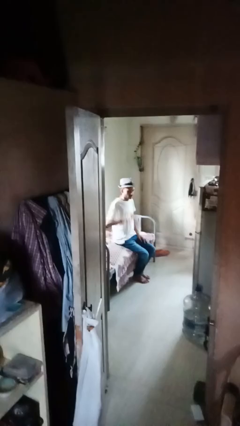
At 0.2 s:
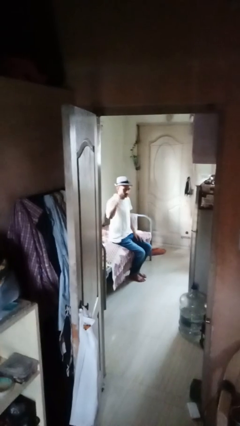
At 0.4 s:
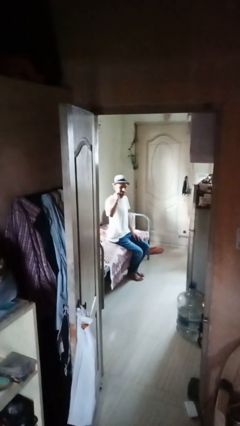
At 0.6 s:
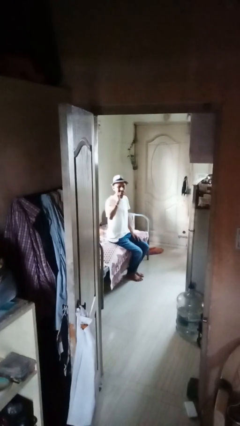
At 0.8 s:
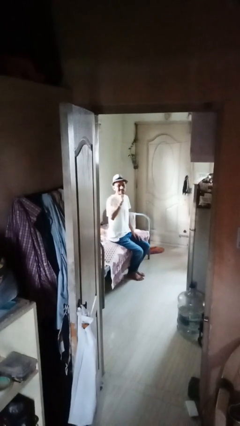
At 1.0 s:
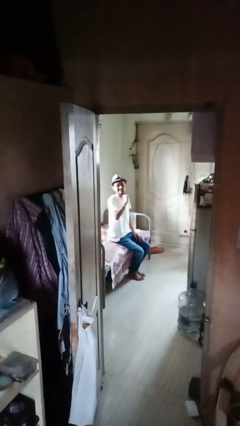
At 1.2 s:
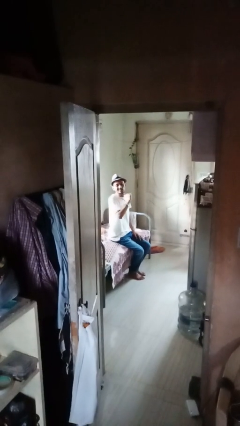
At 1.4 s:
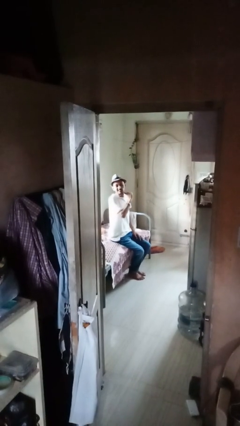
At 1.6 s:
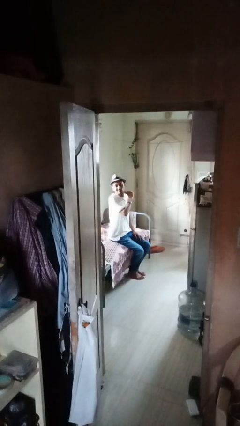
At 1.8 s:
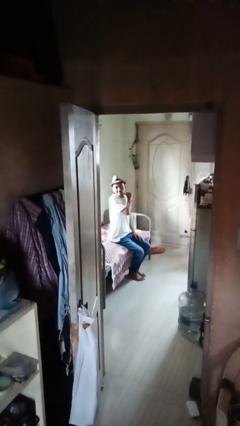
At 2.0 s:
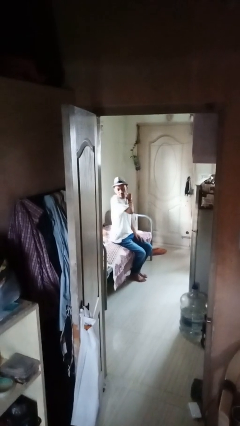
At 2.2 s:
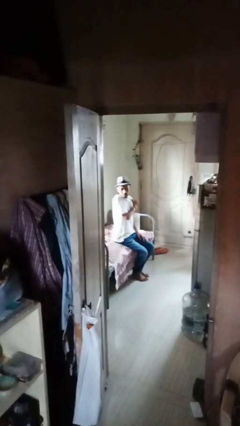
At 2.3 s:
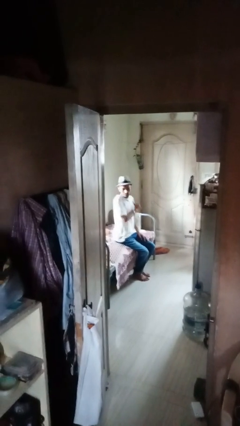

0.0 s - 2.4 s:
person gestures cut

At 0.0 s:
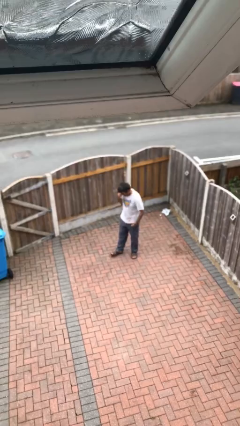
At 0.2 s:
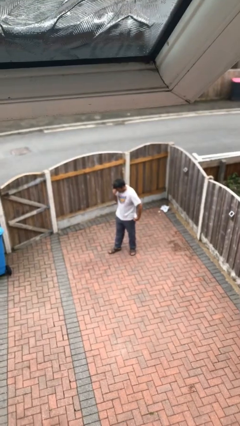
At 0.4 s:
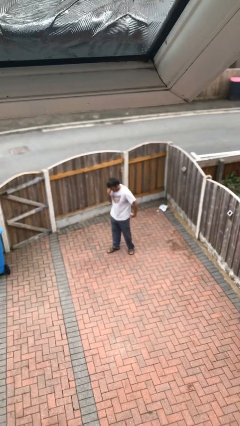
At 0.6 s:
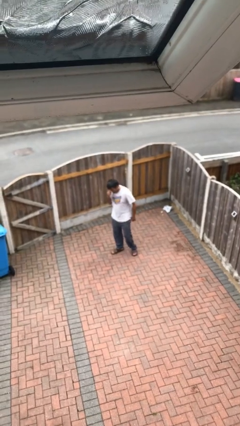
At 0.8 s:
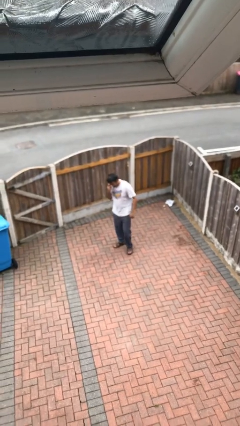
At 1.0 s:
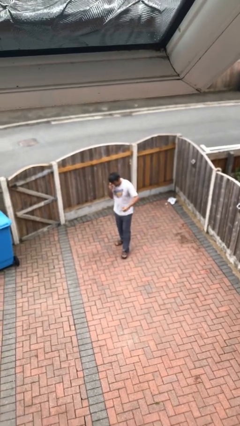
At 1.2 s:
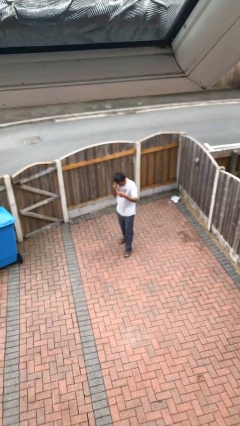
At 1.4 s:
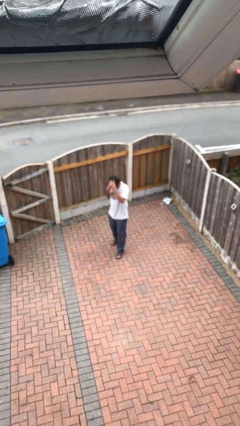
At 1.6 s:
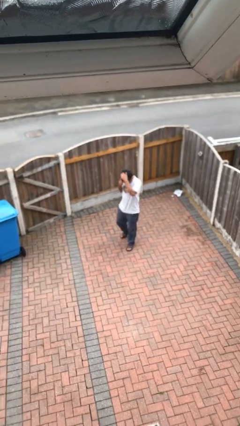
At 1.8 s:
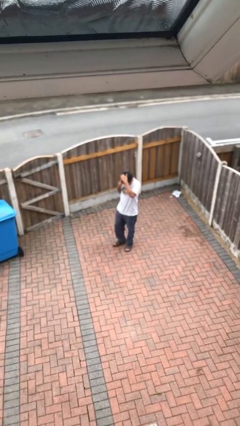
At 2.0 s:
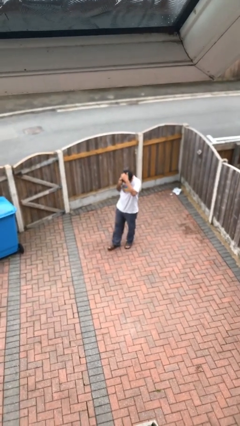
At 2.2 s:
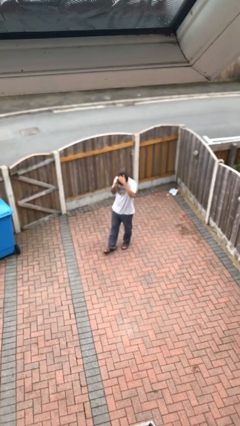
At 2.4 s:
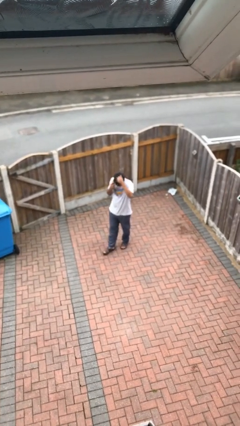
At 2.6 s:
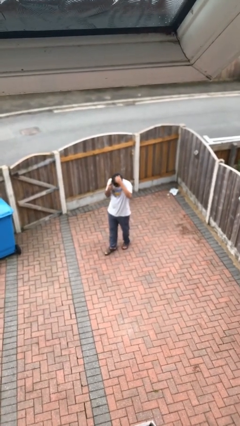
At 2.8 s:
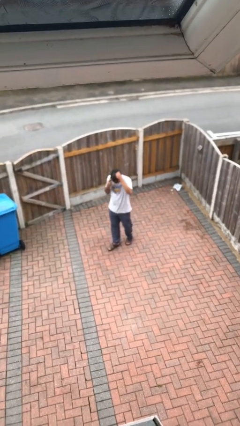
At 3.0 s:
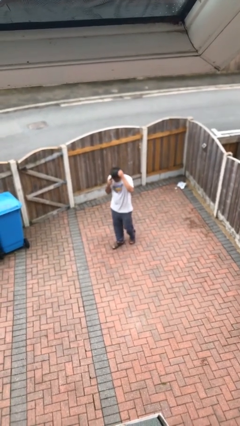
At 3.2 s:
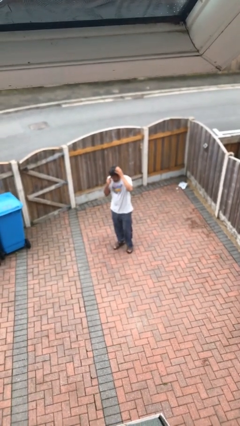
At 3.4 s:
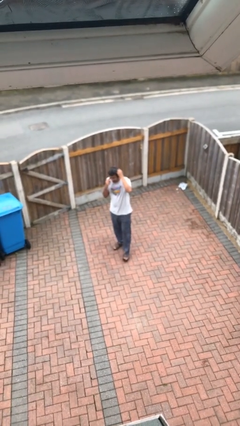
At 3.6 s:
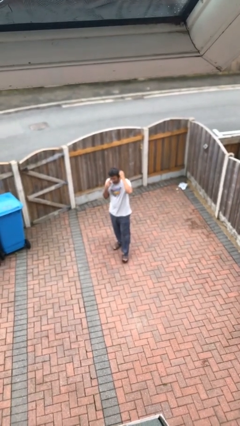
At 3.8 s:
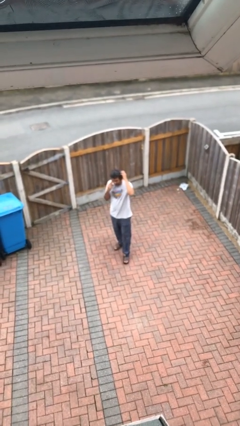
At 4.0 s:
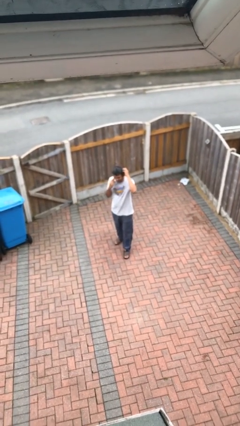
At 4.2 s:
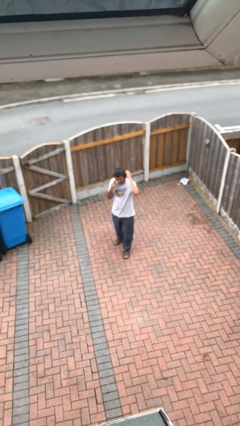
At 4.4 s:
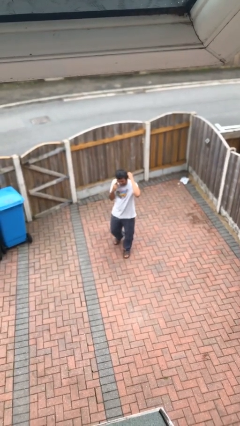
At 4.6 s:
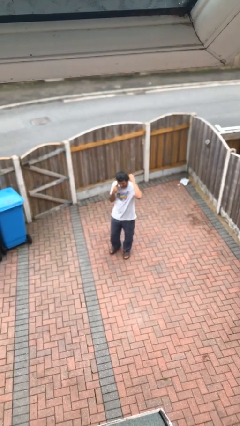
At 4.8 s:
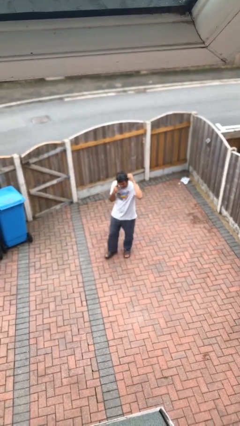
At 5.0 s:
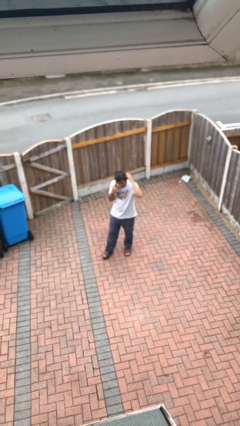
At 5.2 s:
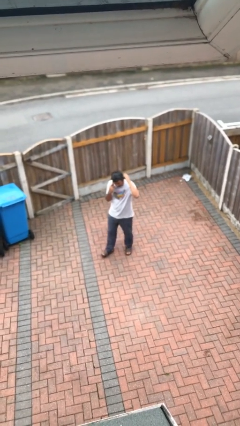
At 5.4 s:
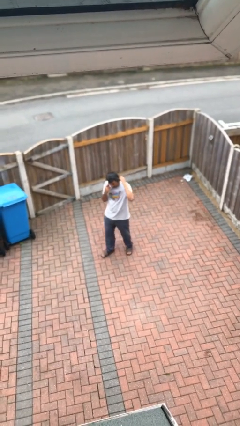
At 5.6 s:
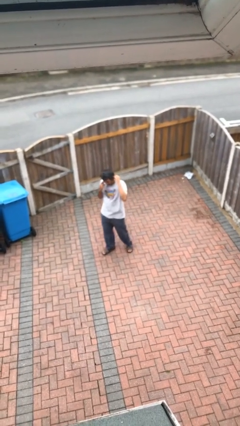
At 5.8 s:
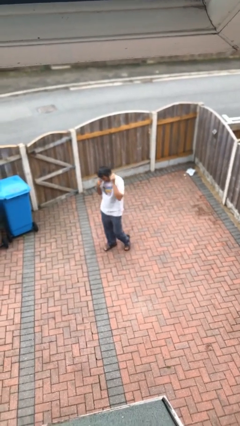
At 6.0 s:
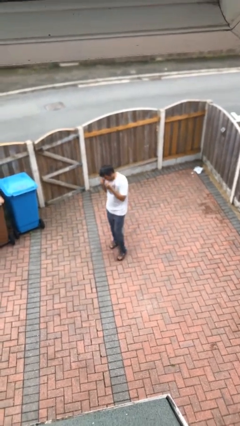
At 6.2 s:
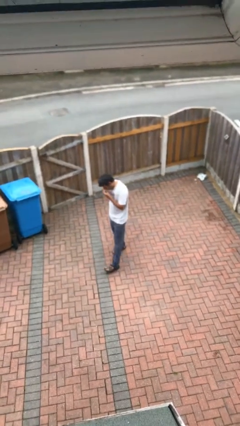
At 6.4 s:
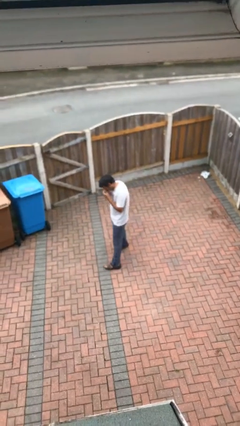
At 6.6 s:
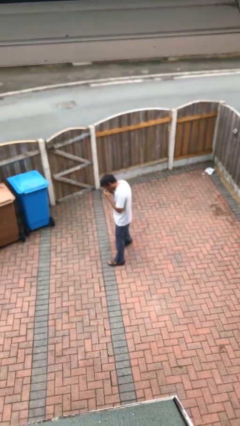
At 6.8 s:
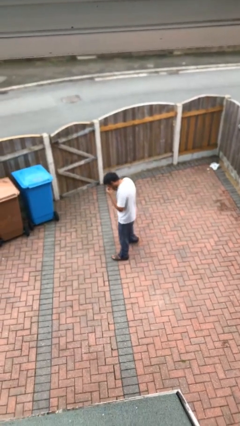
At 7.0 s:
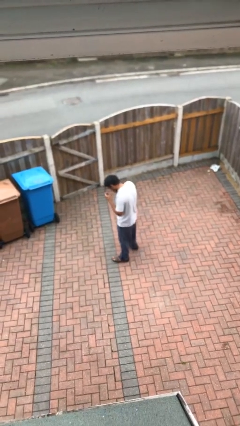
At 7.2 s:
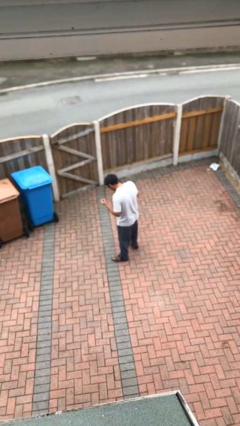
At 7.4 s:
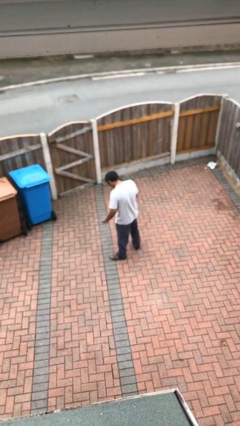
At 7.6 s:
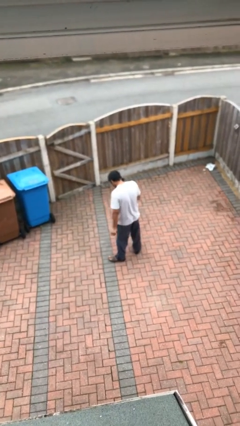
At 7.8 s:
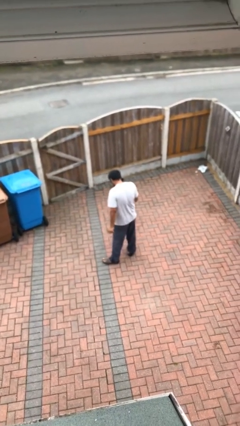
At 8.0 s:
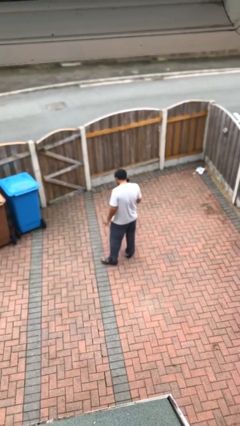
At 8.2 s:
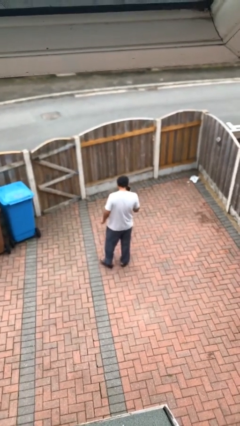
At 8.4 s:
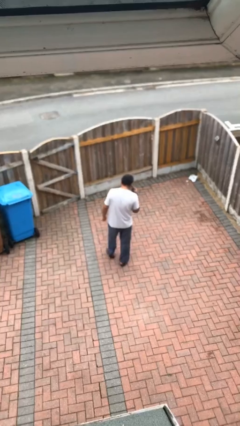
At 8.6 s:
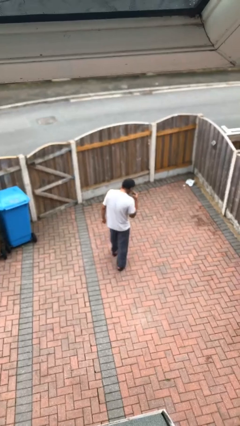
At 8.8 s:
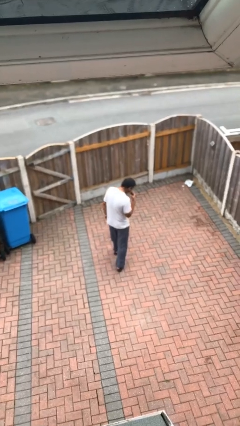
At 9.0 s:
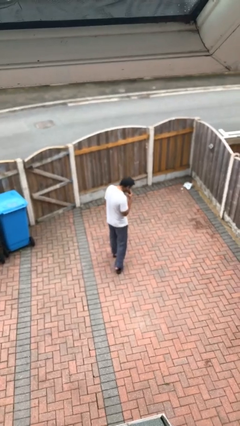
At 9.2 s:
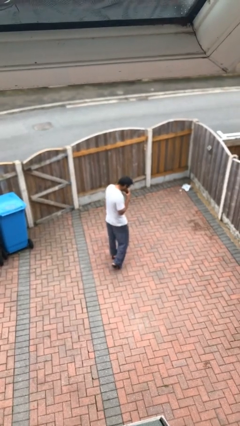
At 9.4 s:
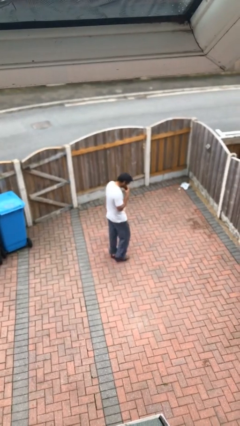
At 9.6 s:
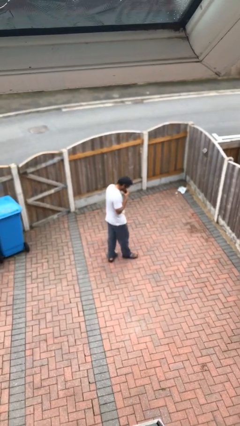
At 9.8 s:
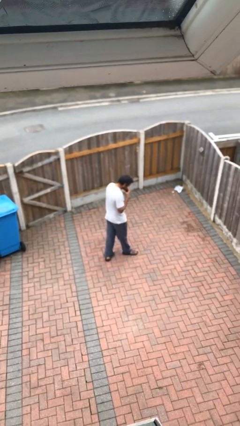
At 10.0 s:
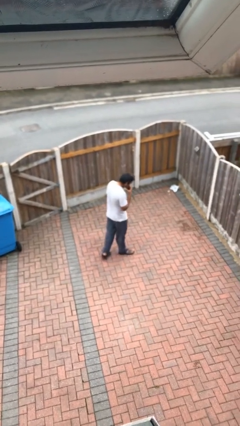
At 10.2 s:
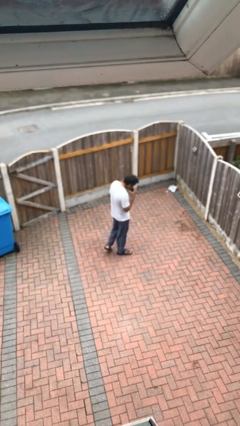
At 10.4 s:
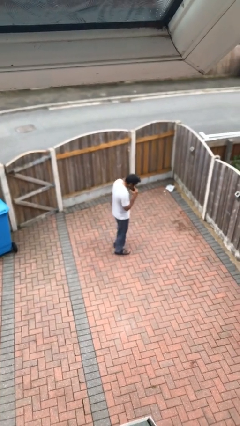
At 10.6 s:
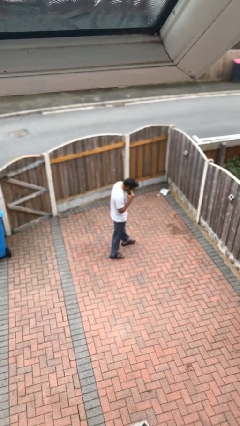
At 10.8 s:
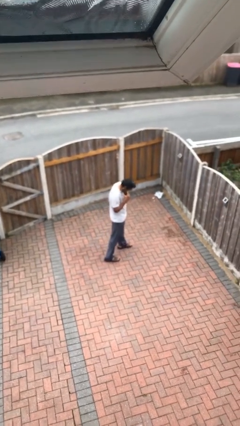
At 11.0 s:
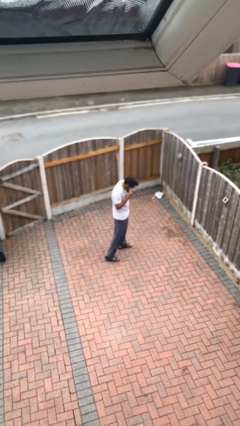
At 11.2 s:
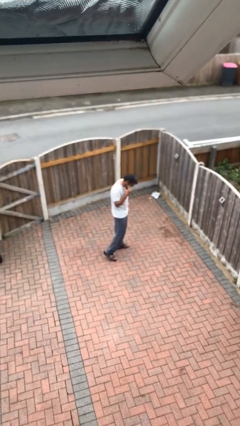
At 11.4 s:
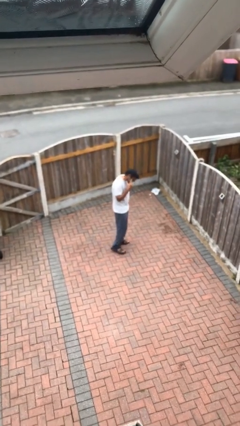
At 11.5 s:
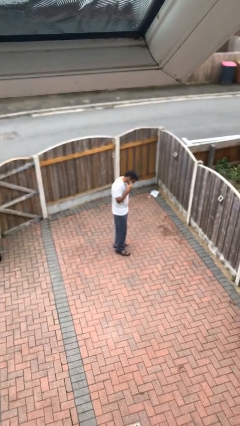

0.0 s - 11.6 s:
person talks on phone

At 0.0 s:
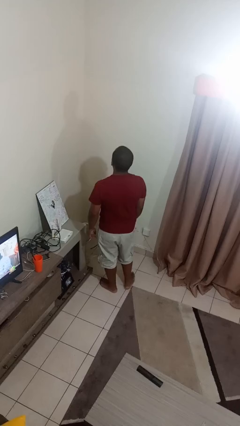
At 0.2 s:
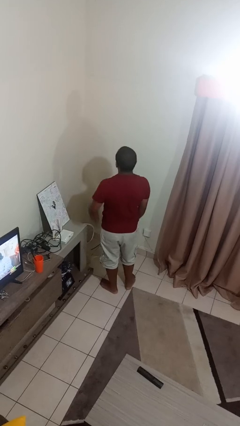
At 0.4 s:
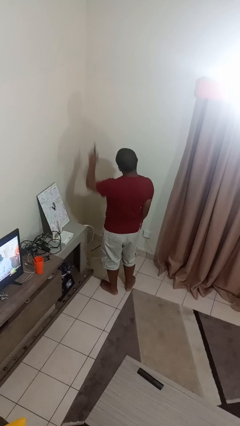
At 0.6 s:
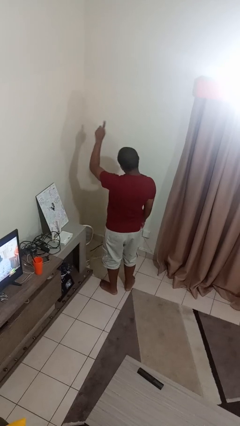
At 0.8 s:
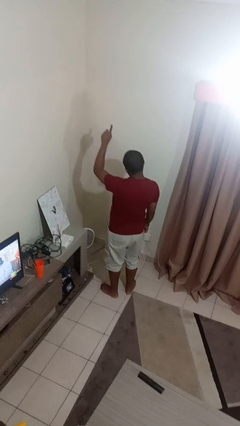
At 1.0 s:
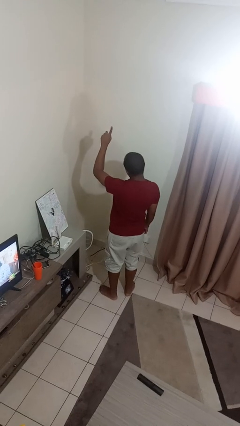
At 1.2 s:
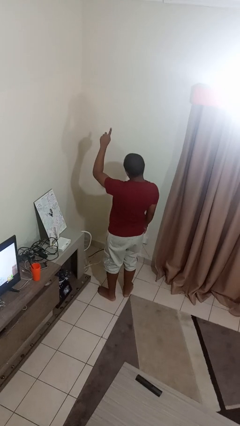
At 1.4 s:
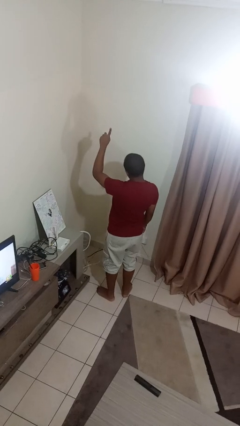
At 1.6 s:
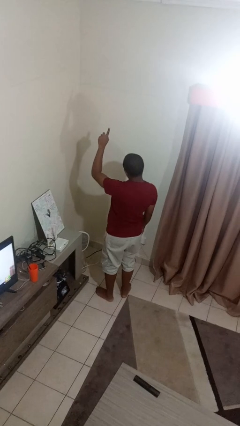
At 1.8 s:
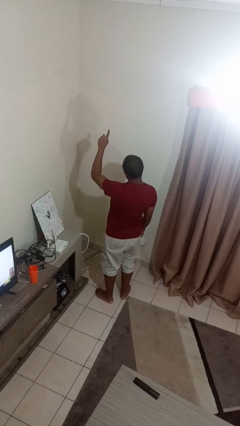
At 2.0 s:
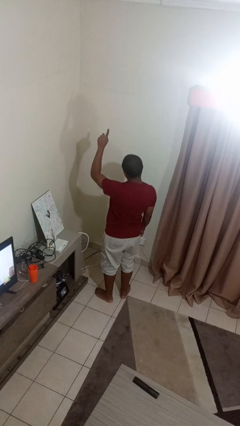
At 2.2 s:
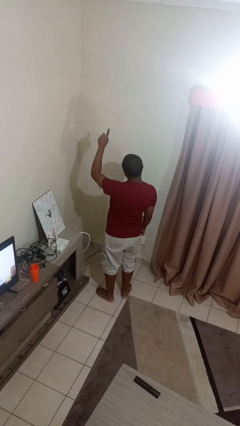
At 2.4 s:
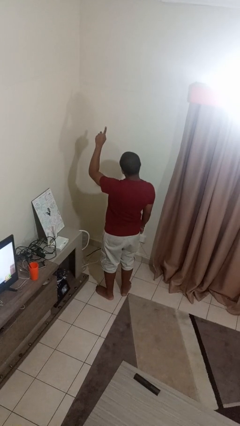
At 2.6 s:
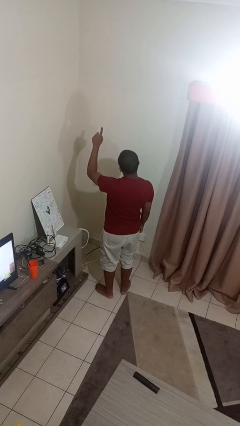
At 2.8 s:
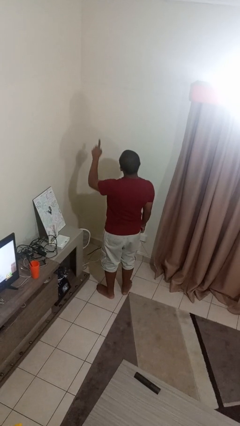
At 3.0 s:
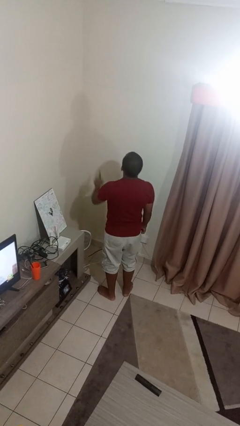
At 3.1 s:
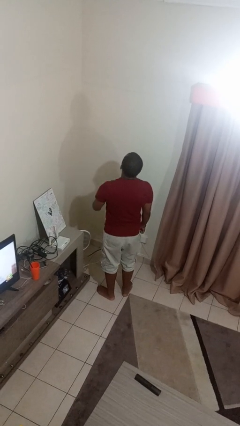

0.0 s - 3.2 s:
person gestures number one

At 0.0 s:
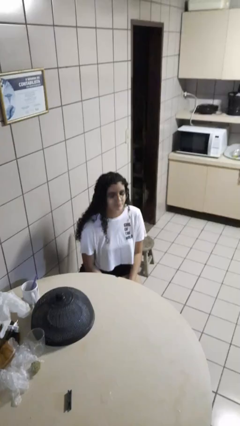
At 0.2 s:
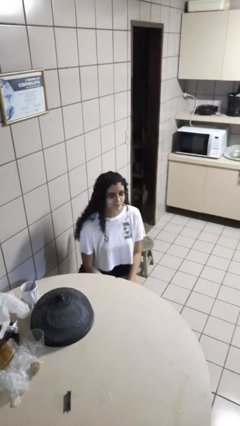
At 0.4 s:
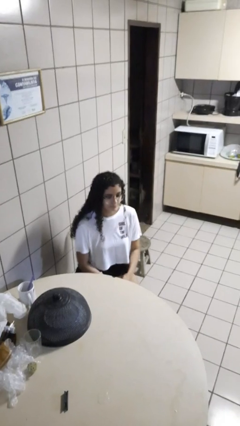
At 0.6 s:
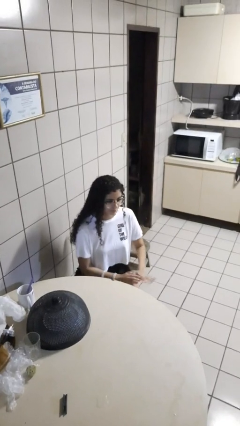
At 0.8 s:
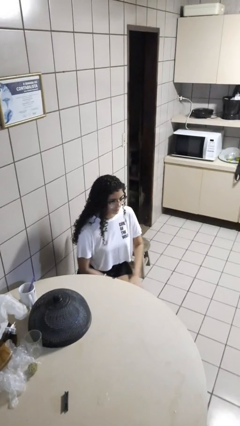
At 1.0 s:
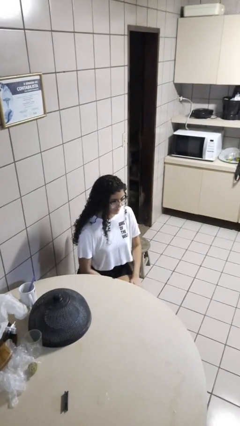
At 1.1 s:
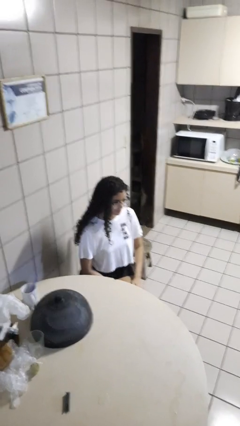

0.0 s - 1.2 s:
person strokes hair
